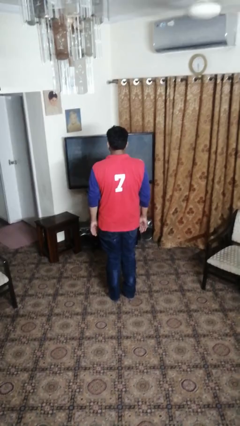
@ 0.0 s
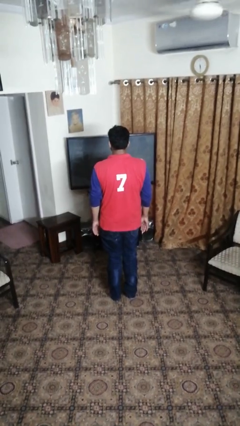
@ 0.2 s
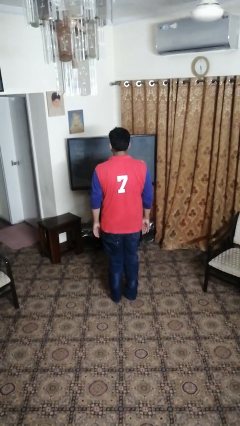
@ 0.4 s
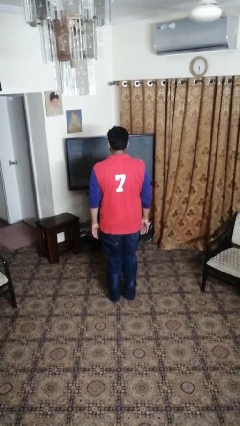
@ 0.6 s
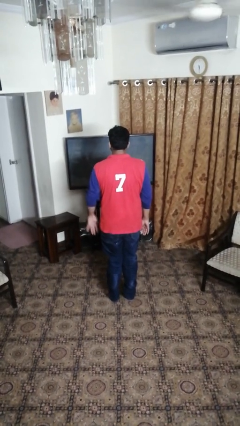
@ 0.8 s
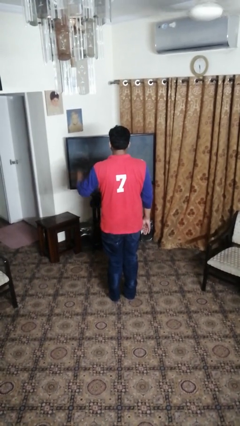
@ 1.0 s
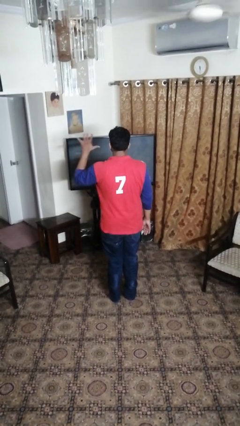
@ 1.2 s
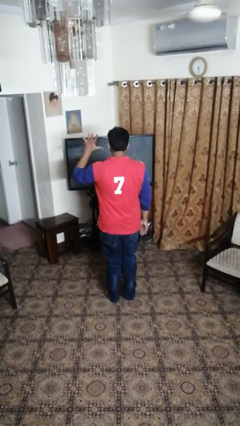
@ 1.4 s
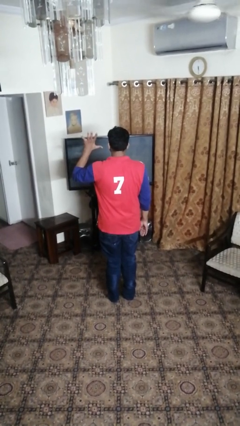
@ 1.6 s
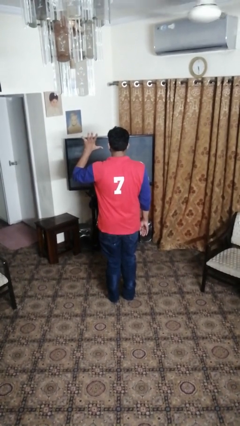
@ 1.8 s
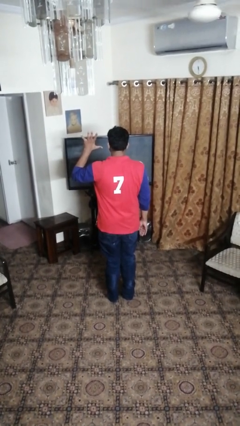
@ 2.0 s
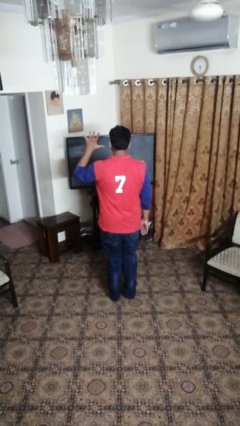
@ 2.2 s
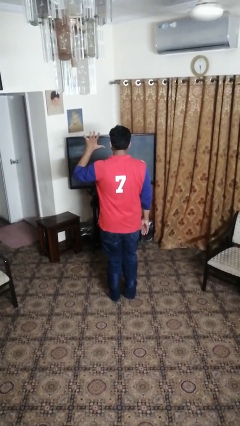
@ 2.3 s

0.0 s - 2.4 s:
person gestures number five

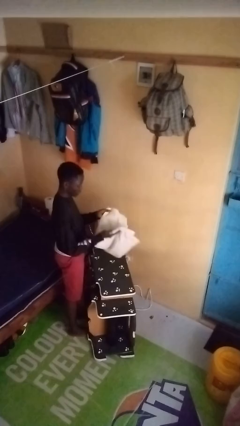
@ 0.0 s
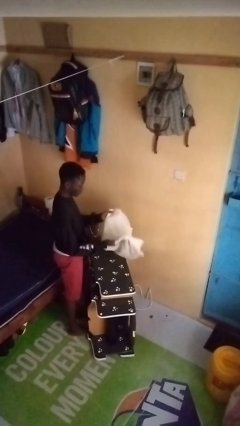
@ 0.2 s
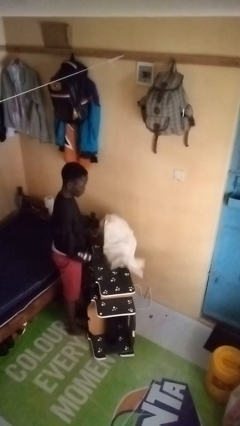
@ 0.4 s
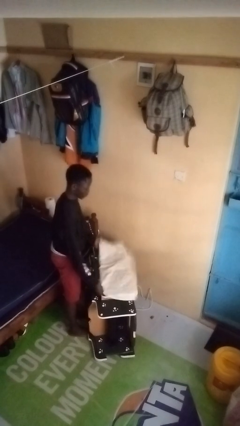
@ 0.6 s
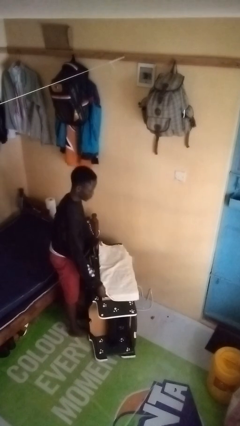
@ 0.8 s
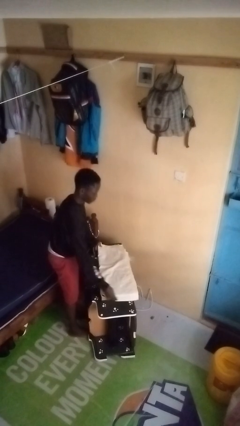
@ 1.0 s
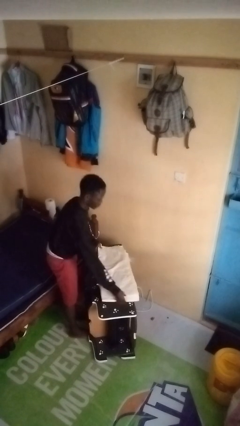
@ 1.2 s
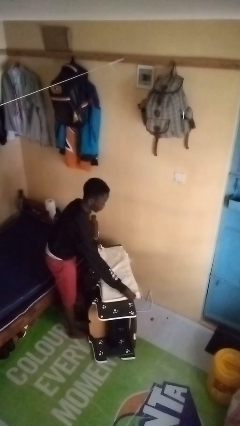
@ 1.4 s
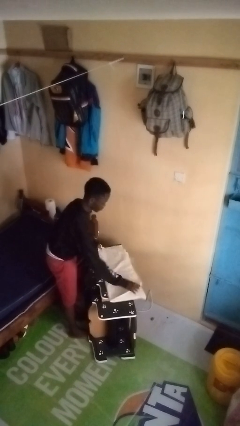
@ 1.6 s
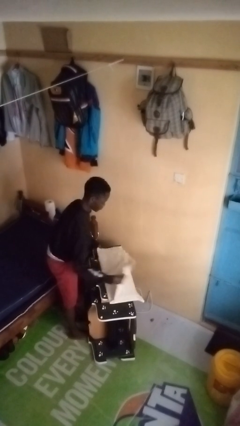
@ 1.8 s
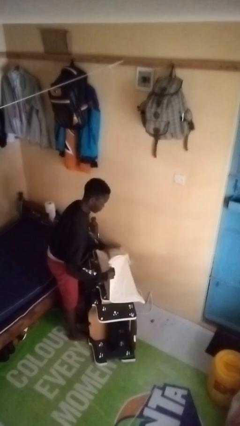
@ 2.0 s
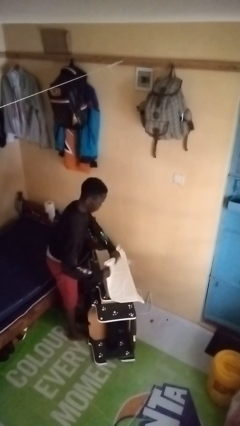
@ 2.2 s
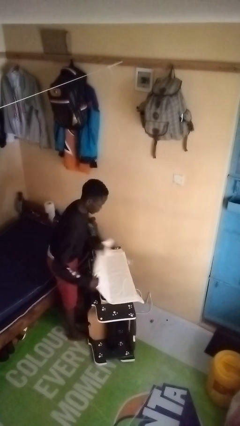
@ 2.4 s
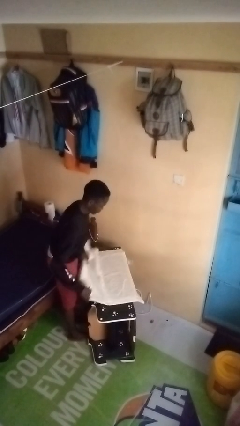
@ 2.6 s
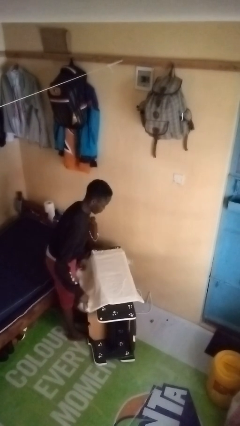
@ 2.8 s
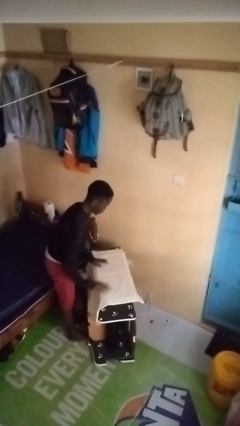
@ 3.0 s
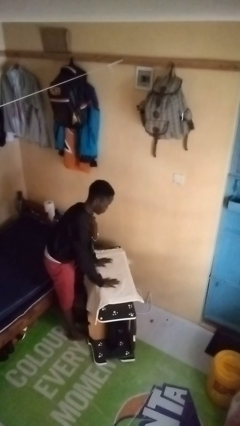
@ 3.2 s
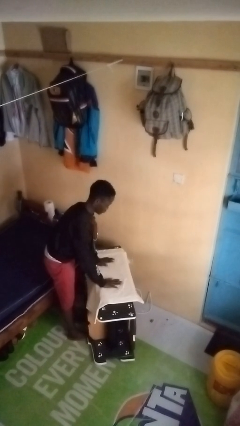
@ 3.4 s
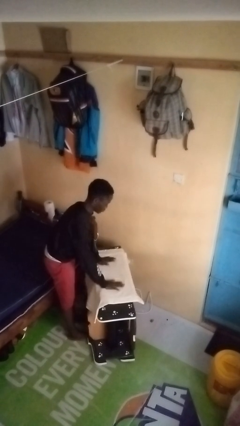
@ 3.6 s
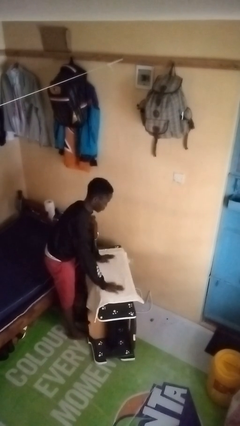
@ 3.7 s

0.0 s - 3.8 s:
person spreads tablecloth

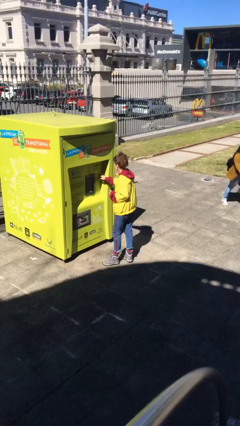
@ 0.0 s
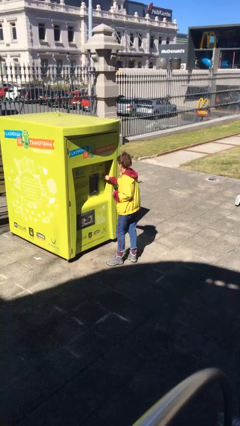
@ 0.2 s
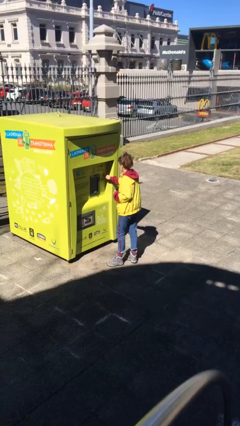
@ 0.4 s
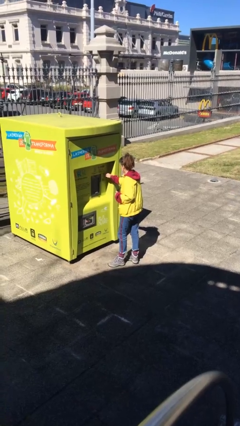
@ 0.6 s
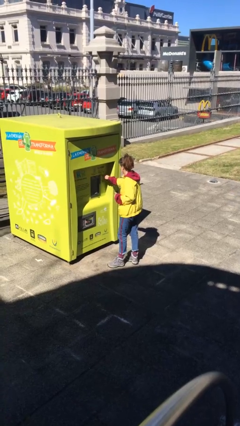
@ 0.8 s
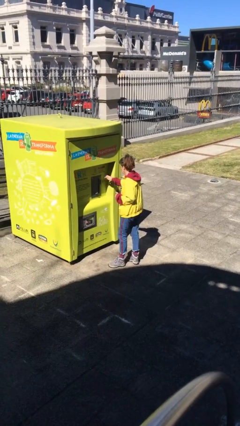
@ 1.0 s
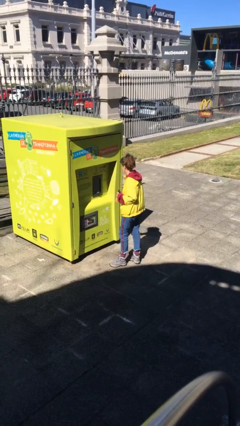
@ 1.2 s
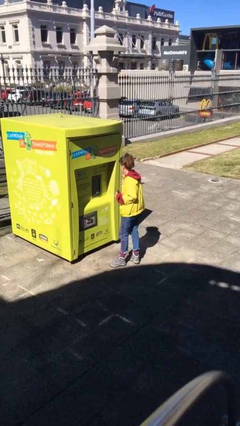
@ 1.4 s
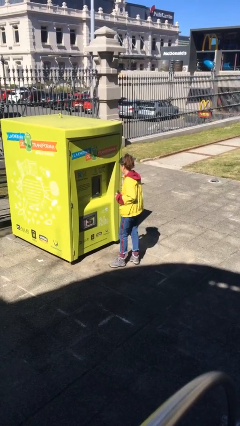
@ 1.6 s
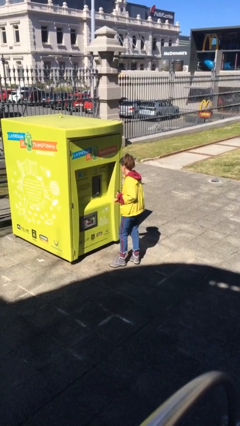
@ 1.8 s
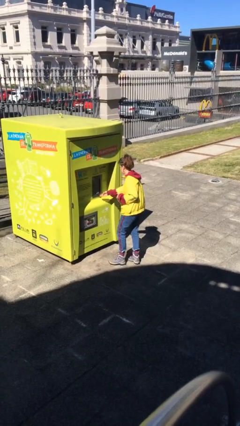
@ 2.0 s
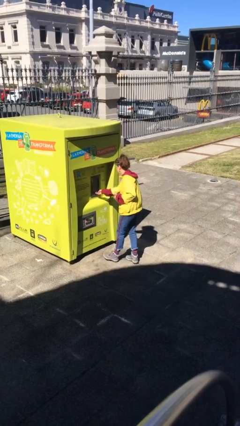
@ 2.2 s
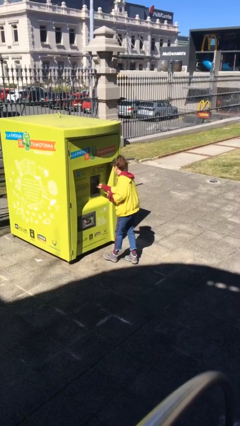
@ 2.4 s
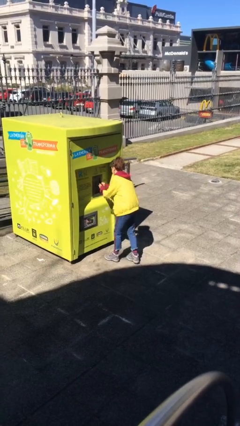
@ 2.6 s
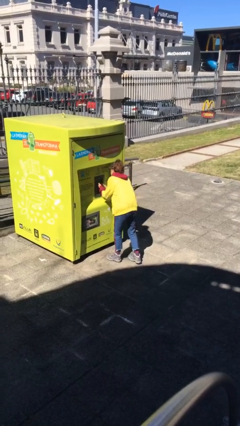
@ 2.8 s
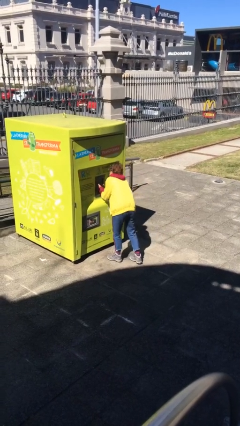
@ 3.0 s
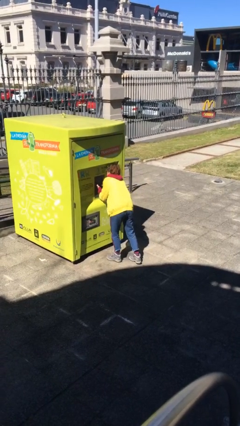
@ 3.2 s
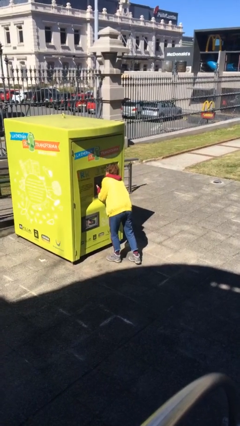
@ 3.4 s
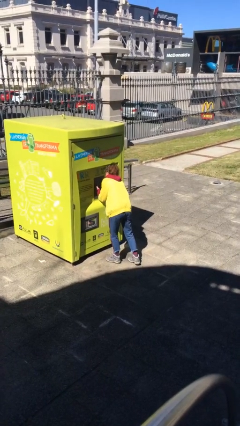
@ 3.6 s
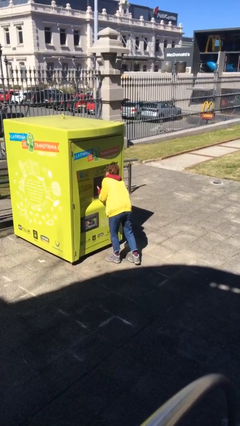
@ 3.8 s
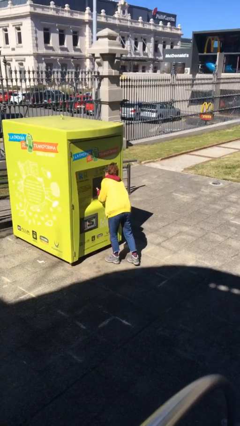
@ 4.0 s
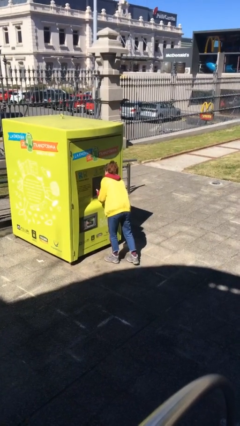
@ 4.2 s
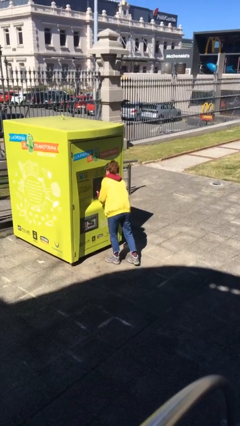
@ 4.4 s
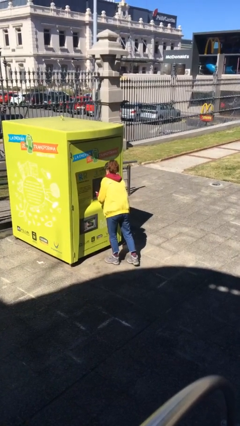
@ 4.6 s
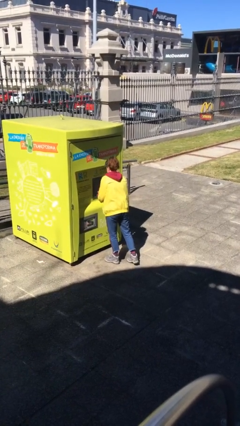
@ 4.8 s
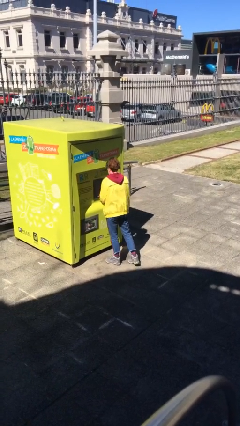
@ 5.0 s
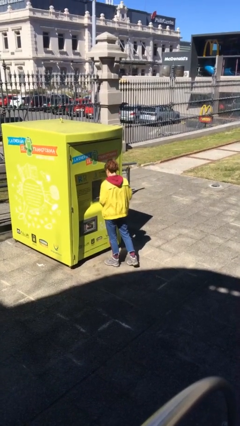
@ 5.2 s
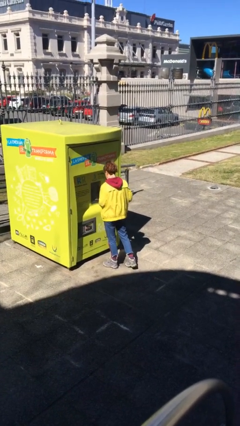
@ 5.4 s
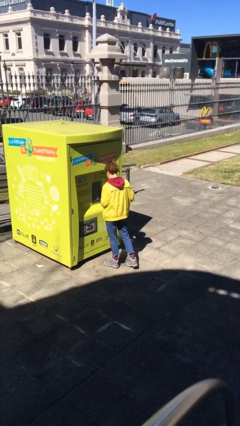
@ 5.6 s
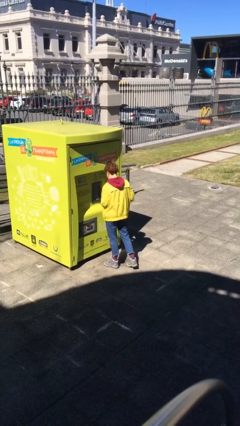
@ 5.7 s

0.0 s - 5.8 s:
person purchases from machine

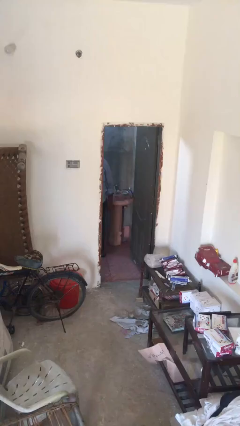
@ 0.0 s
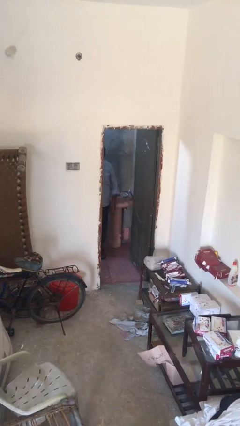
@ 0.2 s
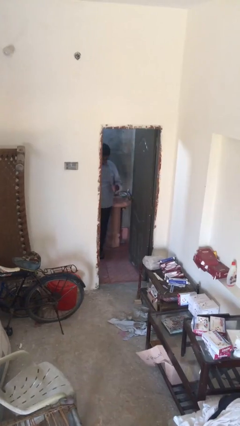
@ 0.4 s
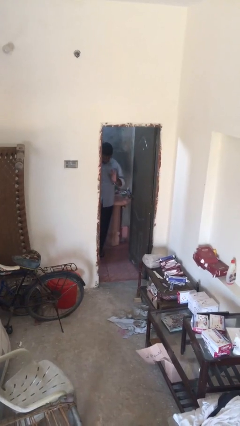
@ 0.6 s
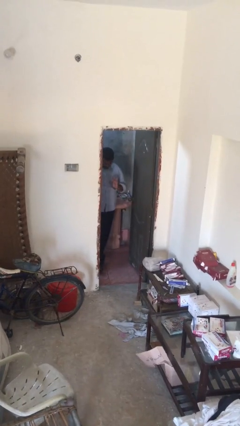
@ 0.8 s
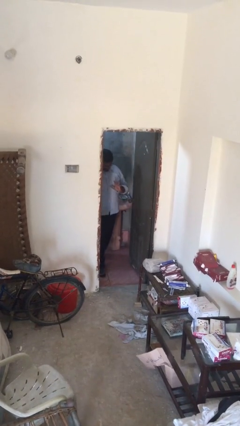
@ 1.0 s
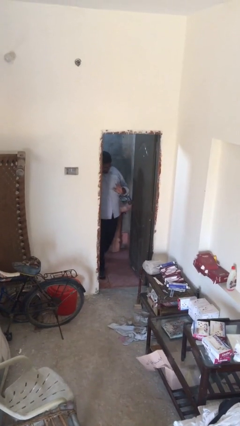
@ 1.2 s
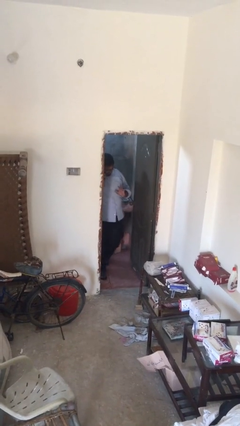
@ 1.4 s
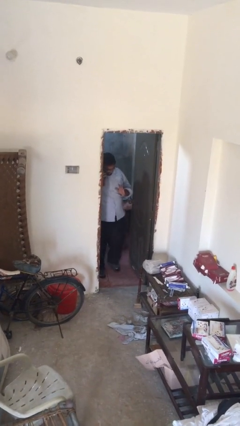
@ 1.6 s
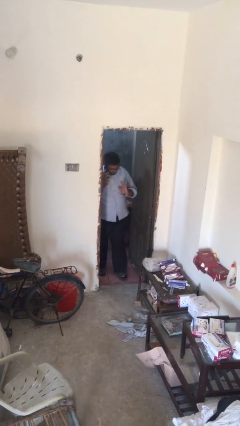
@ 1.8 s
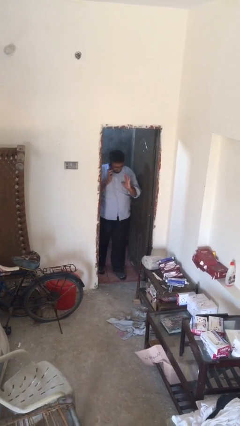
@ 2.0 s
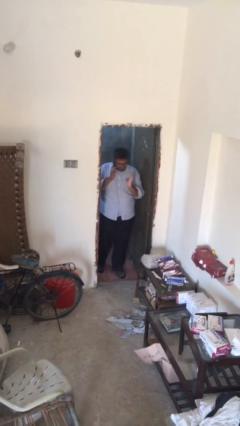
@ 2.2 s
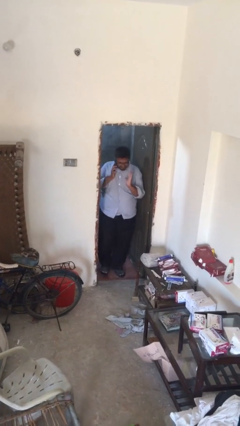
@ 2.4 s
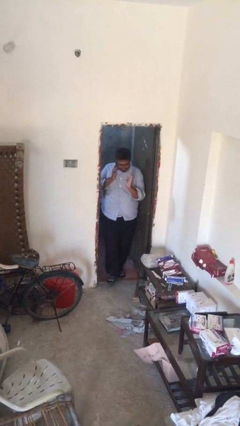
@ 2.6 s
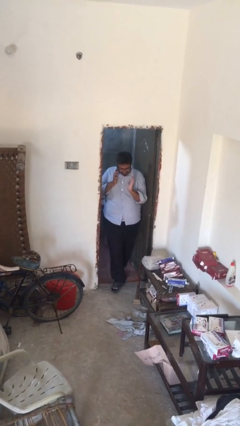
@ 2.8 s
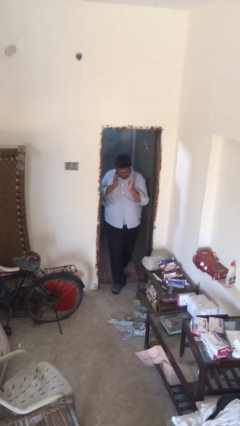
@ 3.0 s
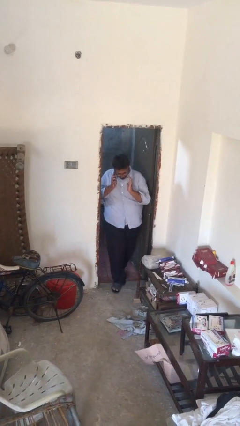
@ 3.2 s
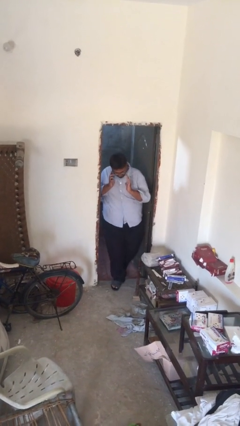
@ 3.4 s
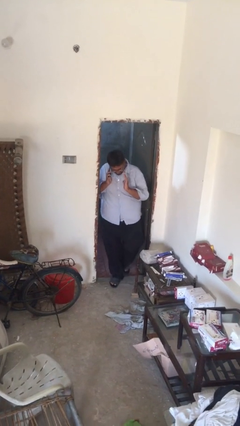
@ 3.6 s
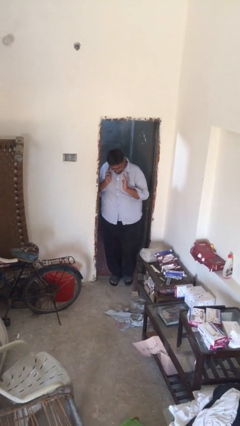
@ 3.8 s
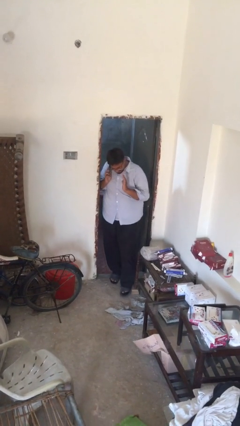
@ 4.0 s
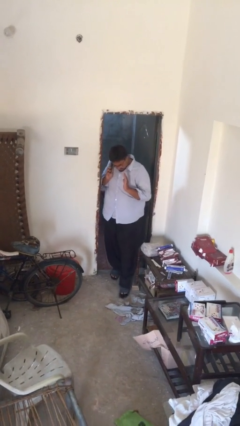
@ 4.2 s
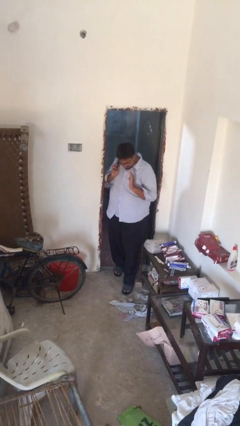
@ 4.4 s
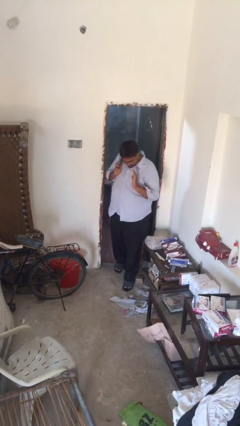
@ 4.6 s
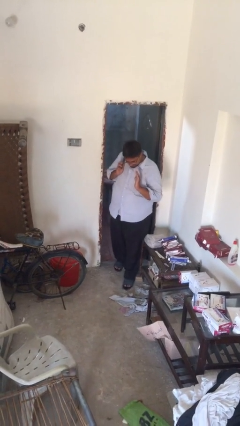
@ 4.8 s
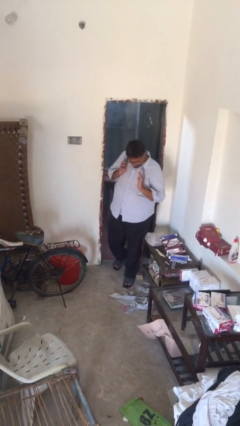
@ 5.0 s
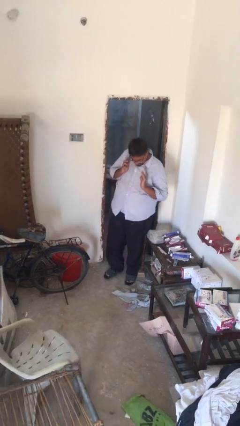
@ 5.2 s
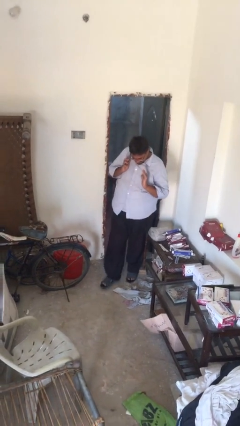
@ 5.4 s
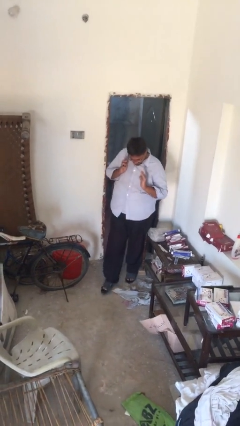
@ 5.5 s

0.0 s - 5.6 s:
person enters scene through structure

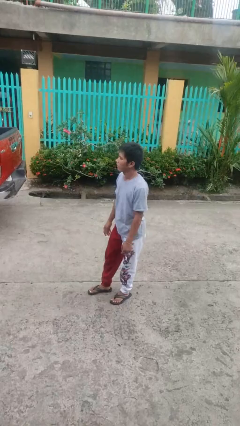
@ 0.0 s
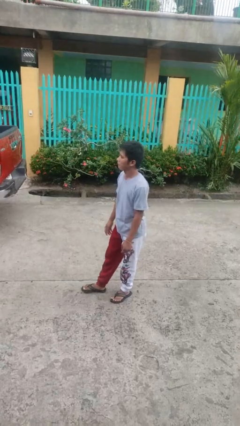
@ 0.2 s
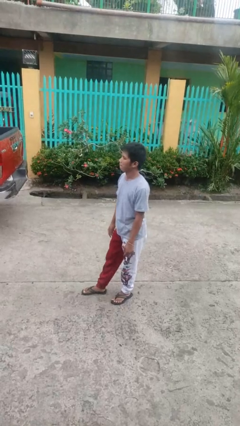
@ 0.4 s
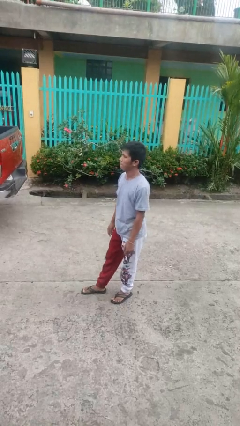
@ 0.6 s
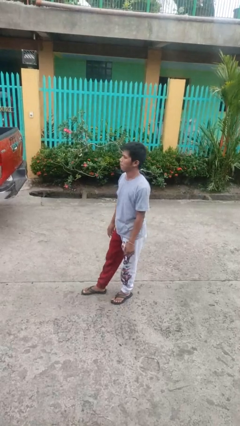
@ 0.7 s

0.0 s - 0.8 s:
person gestures raise hand
